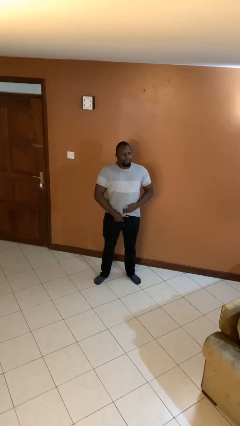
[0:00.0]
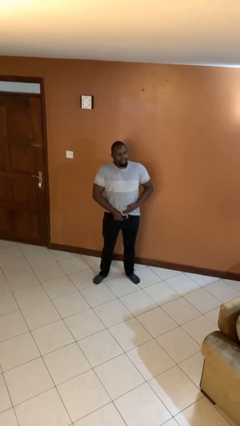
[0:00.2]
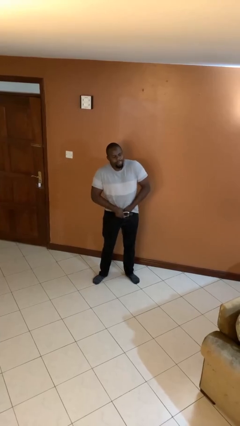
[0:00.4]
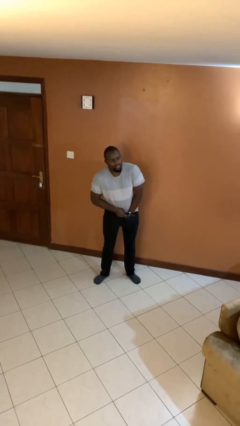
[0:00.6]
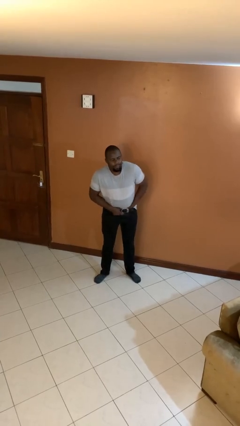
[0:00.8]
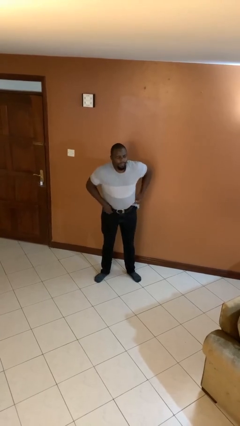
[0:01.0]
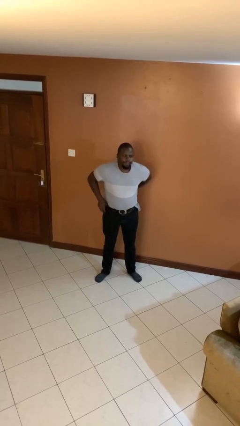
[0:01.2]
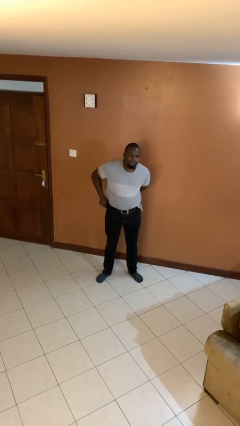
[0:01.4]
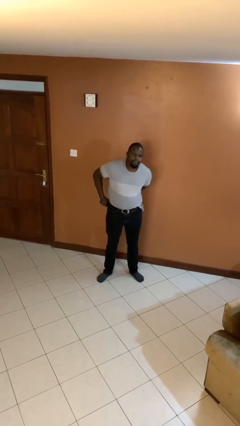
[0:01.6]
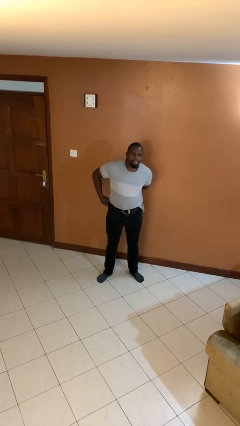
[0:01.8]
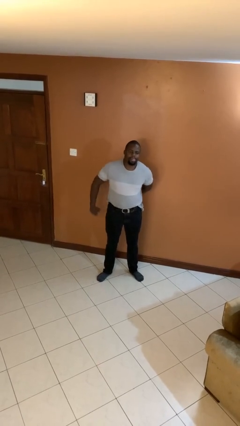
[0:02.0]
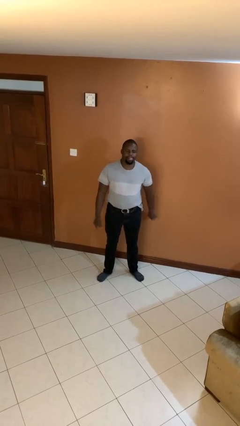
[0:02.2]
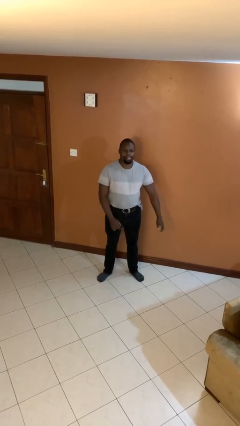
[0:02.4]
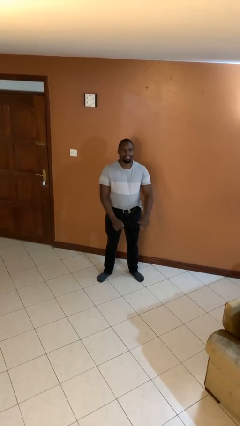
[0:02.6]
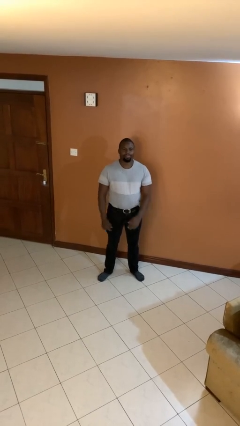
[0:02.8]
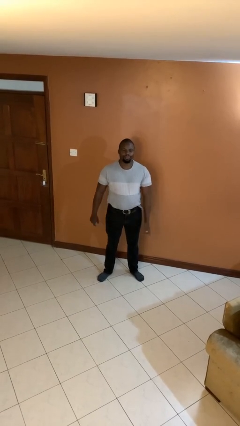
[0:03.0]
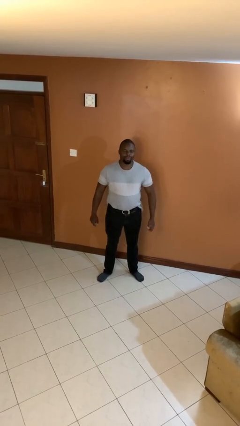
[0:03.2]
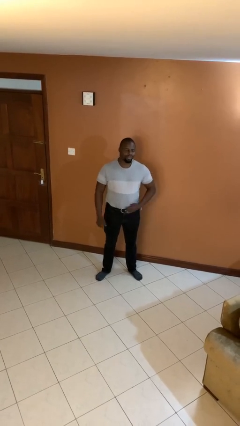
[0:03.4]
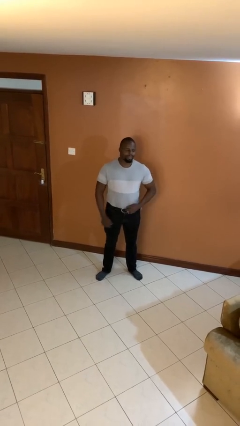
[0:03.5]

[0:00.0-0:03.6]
person tucks in shirt

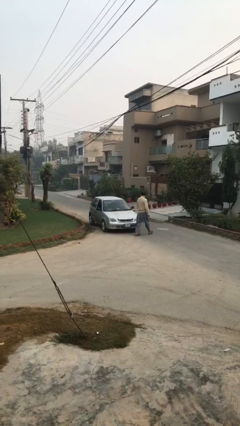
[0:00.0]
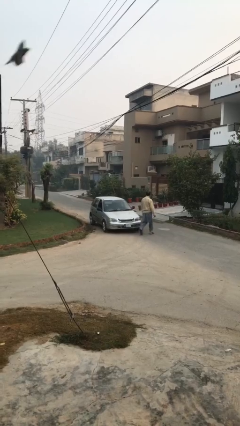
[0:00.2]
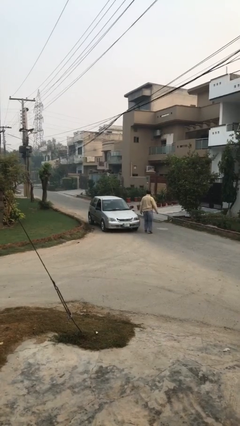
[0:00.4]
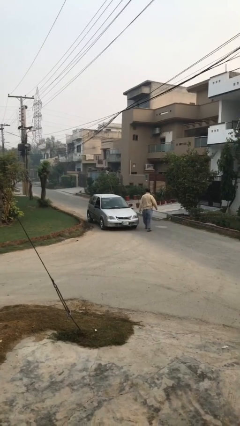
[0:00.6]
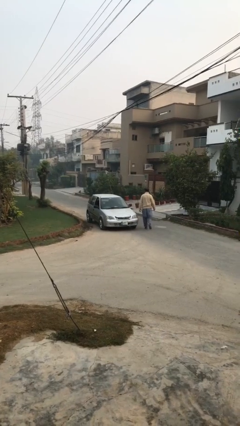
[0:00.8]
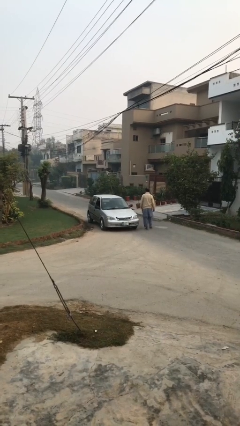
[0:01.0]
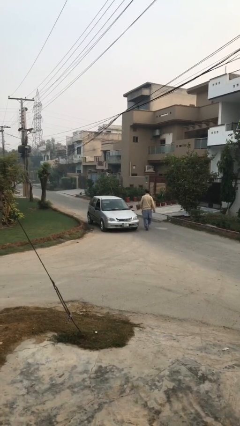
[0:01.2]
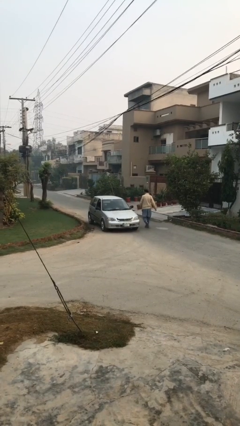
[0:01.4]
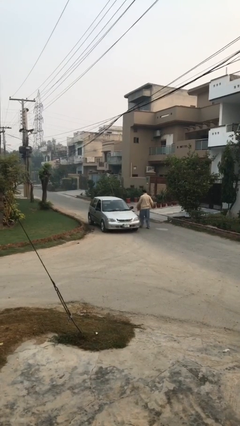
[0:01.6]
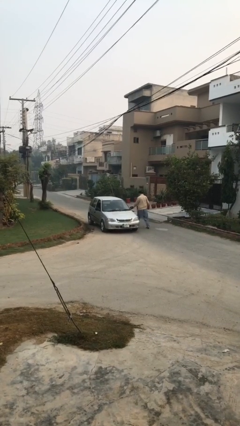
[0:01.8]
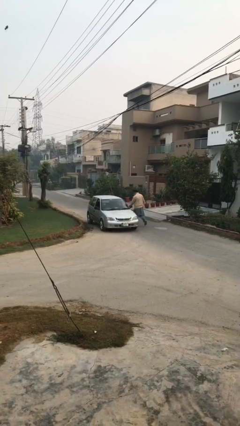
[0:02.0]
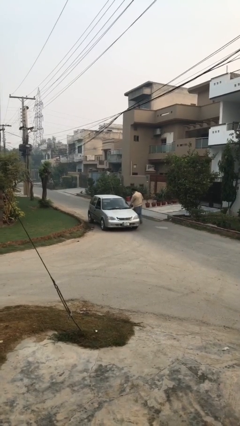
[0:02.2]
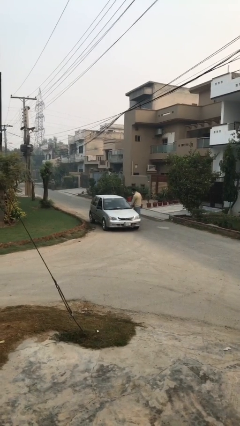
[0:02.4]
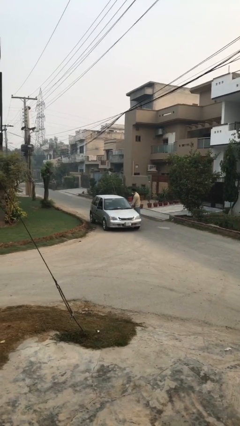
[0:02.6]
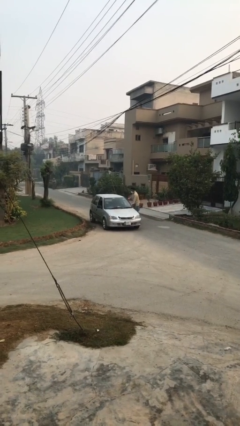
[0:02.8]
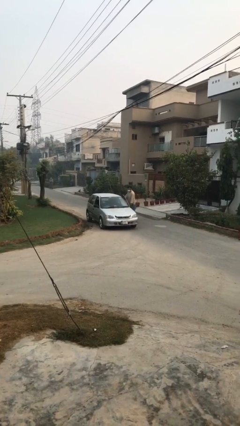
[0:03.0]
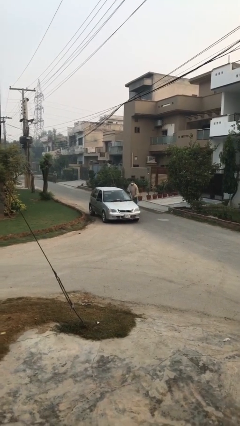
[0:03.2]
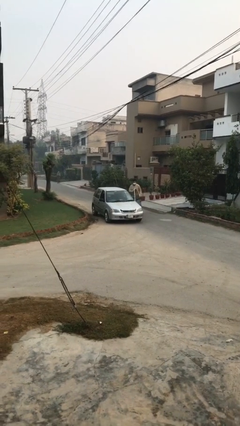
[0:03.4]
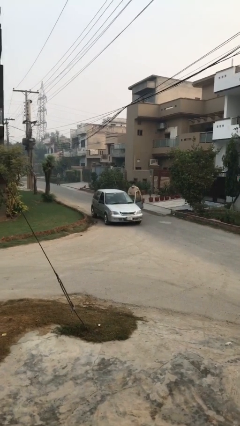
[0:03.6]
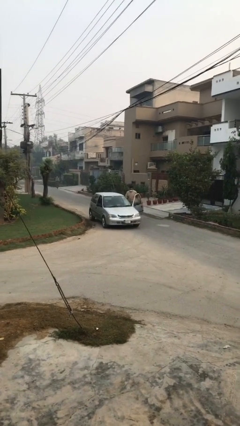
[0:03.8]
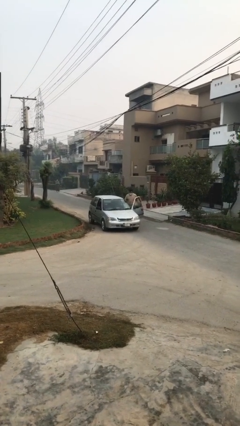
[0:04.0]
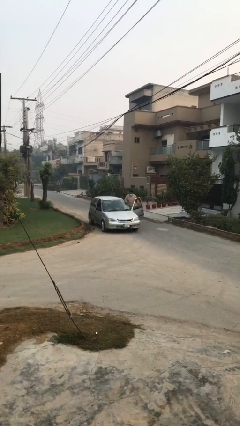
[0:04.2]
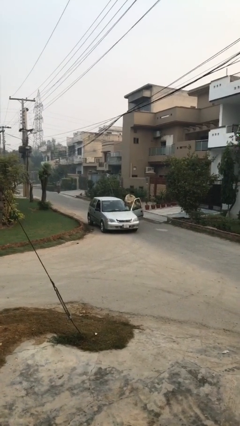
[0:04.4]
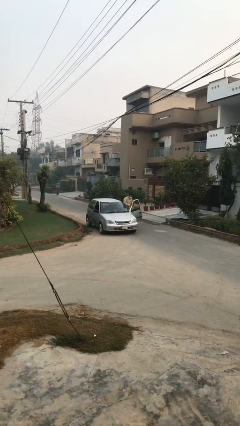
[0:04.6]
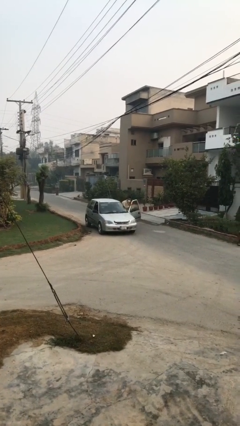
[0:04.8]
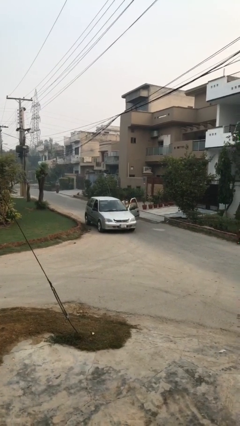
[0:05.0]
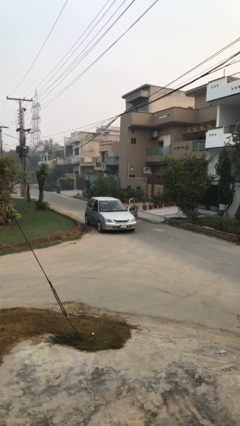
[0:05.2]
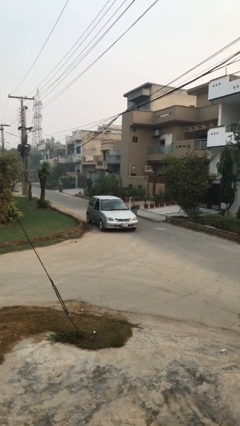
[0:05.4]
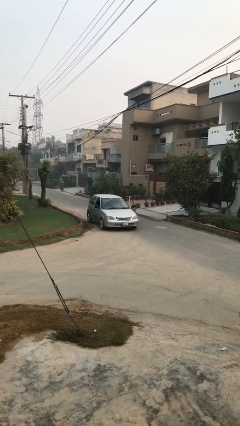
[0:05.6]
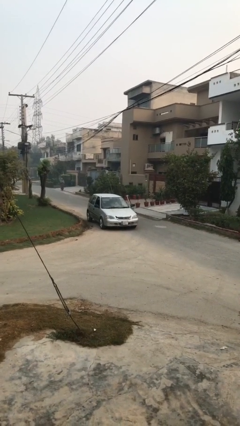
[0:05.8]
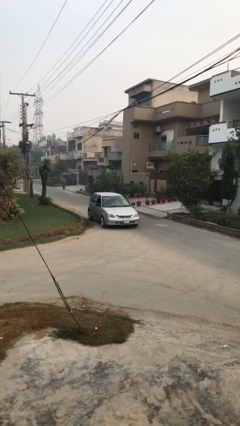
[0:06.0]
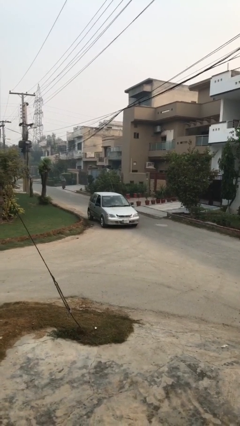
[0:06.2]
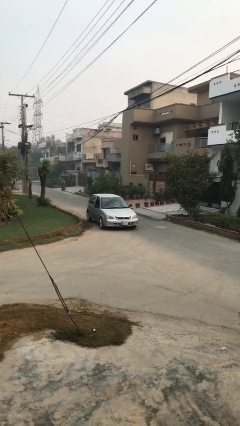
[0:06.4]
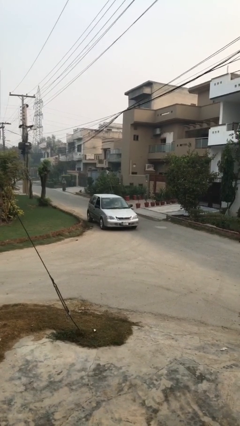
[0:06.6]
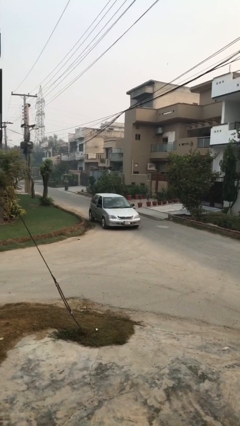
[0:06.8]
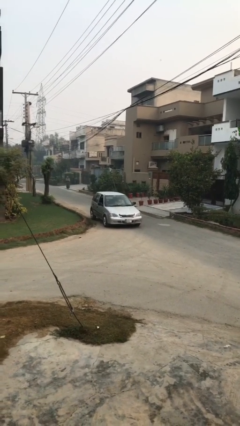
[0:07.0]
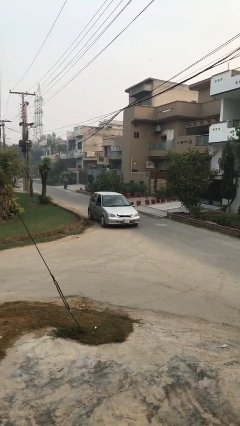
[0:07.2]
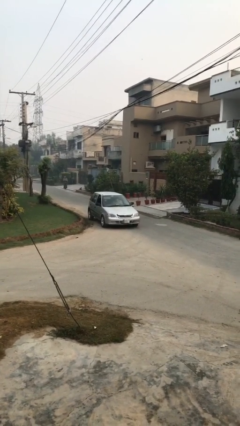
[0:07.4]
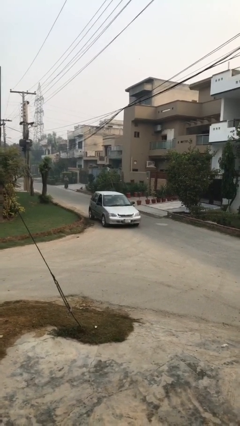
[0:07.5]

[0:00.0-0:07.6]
car picks up person

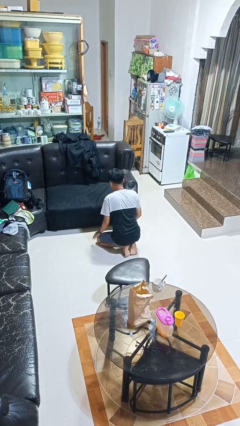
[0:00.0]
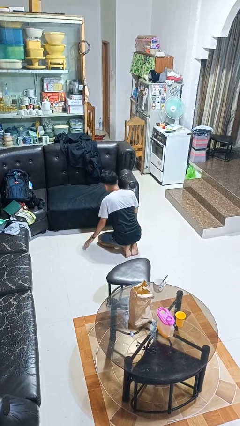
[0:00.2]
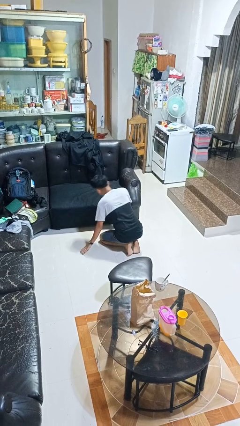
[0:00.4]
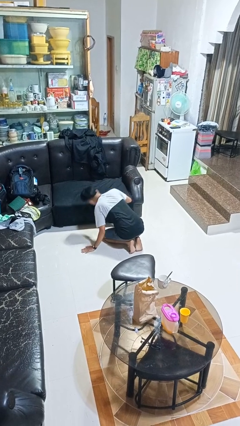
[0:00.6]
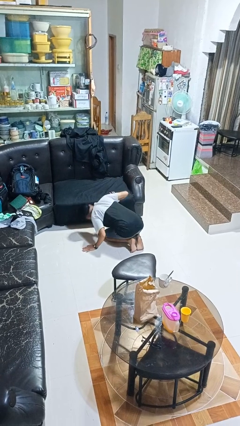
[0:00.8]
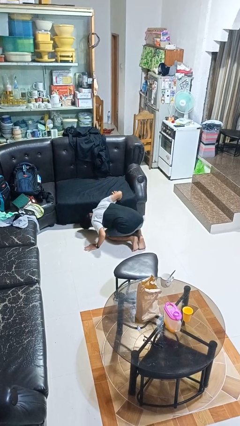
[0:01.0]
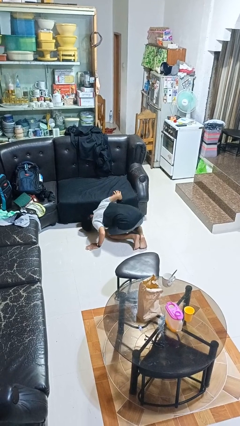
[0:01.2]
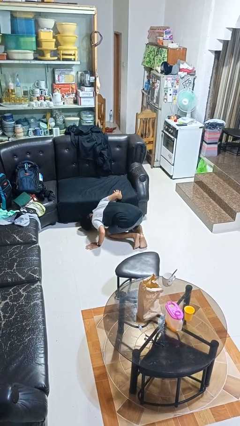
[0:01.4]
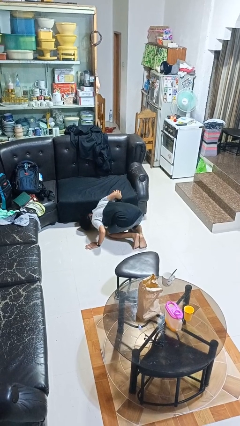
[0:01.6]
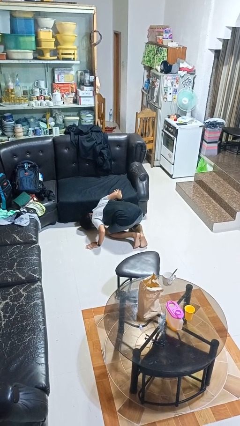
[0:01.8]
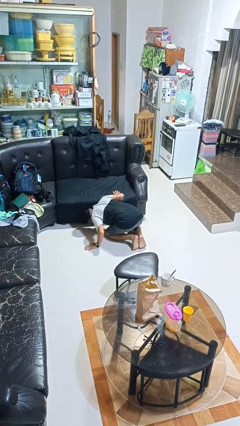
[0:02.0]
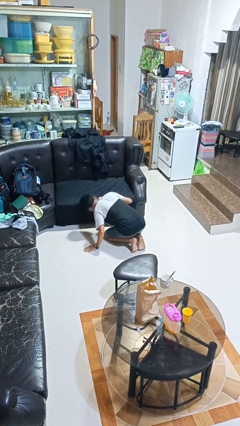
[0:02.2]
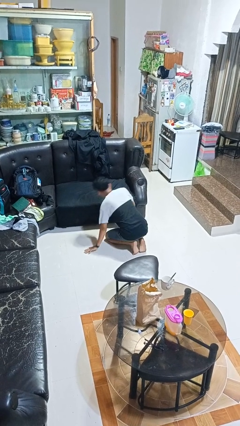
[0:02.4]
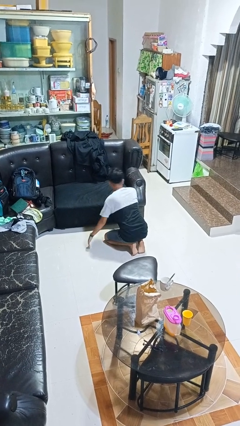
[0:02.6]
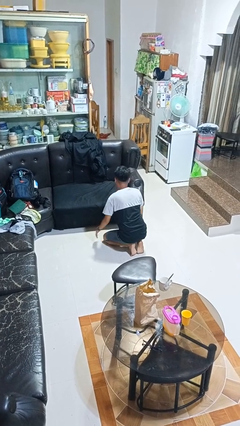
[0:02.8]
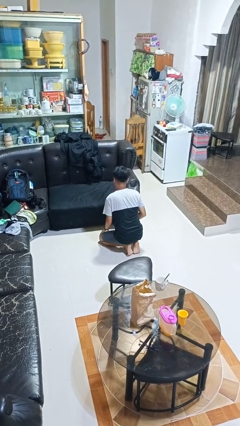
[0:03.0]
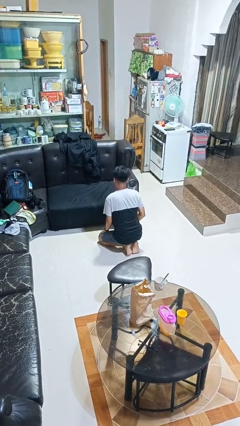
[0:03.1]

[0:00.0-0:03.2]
person searches under couch

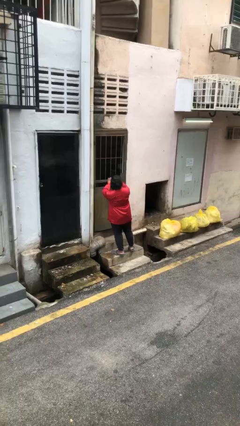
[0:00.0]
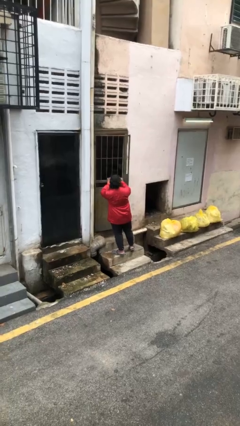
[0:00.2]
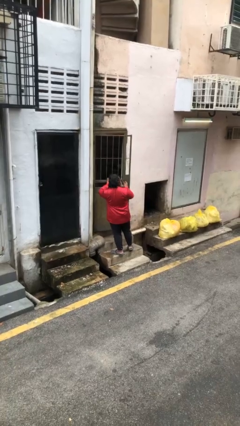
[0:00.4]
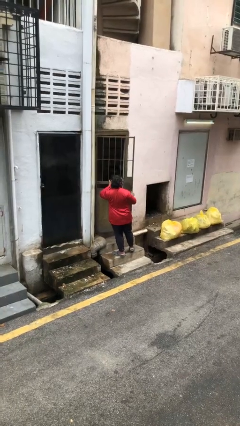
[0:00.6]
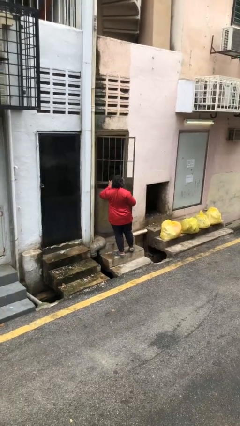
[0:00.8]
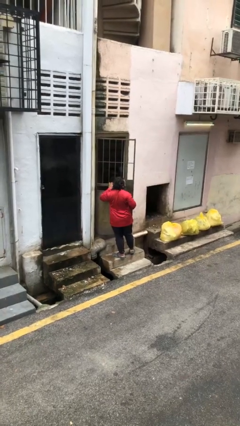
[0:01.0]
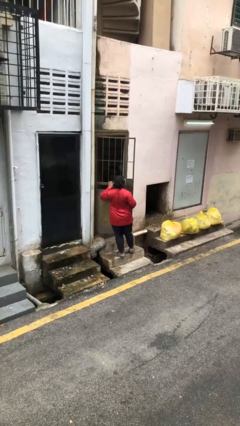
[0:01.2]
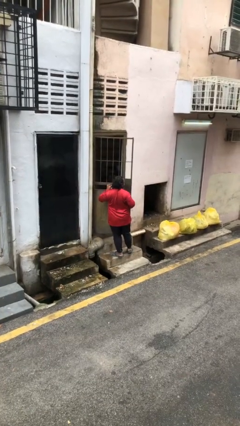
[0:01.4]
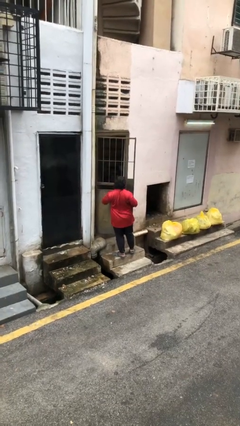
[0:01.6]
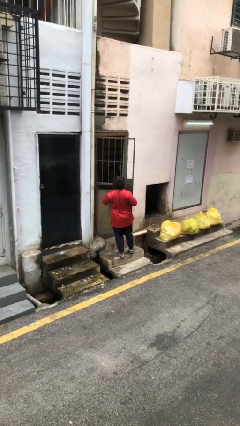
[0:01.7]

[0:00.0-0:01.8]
person opens facility door

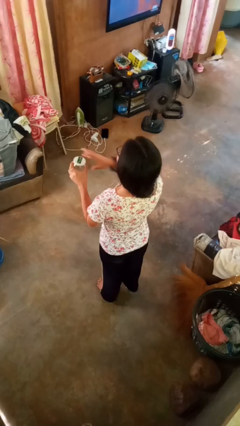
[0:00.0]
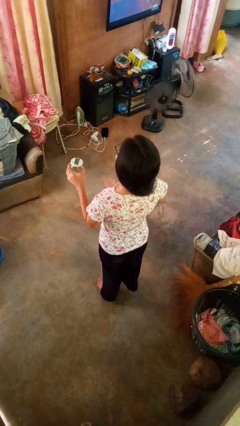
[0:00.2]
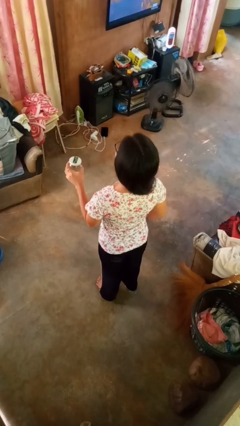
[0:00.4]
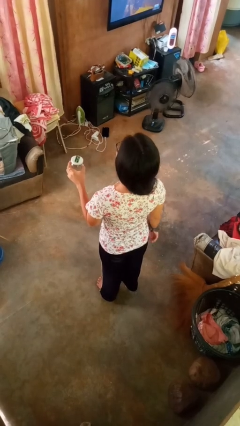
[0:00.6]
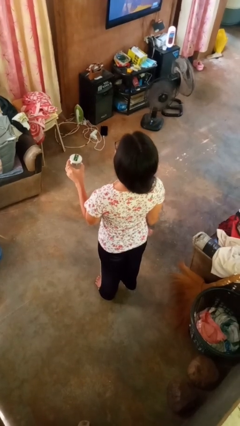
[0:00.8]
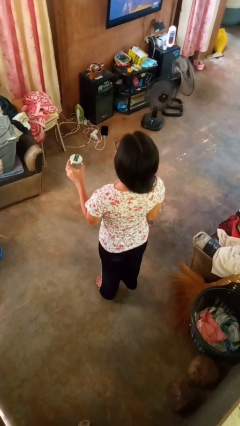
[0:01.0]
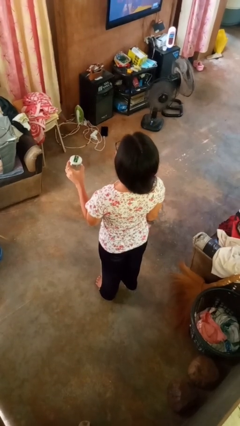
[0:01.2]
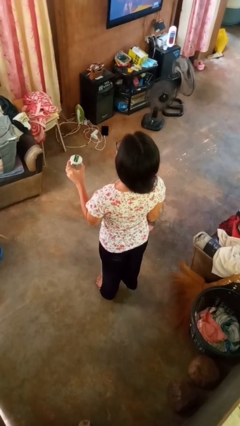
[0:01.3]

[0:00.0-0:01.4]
person closes jar

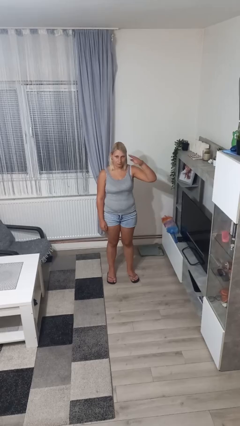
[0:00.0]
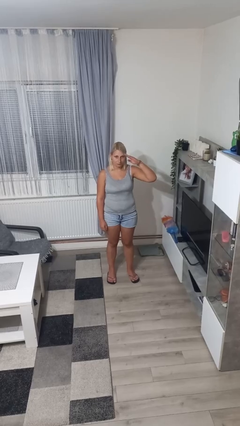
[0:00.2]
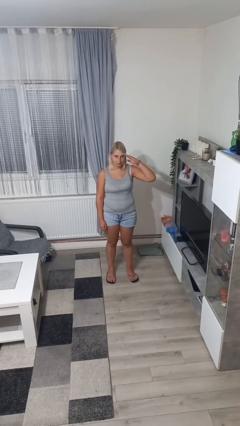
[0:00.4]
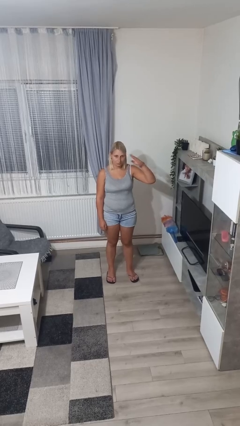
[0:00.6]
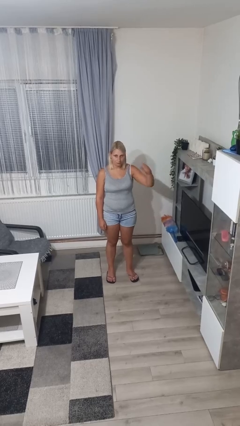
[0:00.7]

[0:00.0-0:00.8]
person salutes
